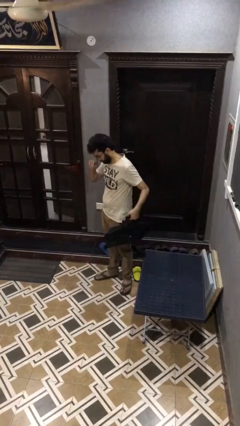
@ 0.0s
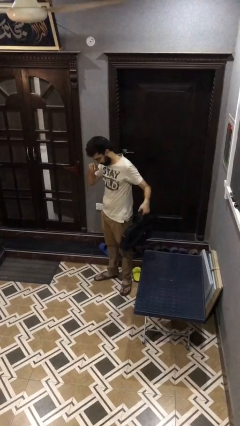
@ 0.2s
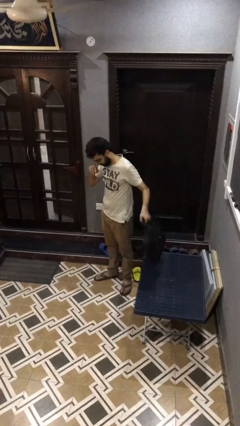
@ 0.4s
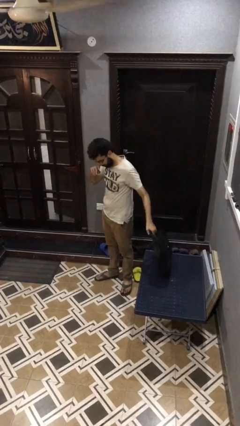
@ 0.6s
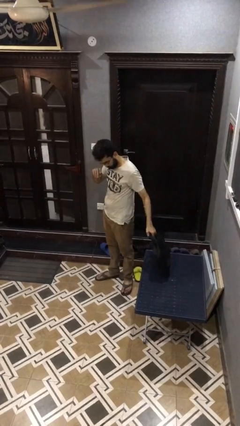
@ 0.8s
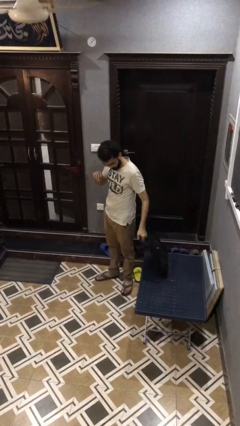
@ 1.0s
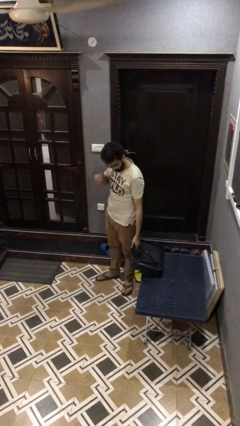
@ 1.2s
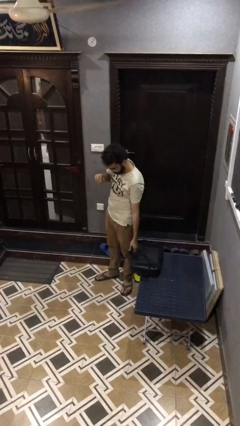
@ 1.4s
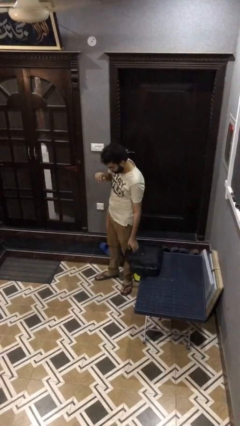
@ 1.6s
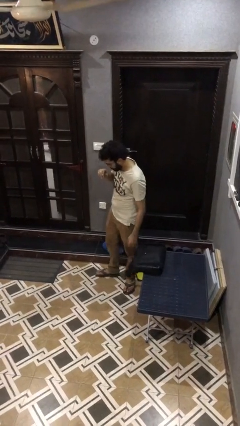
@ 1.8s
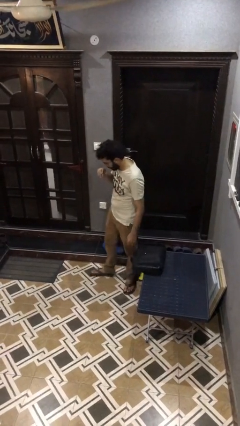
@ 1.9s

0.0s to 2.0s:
person puts down object on table

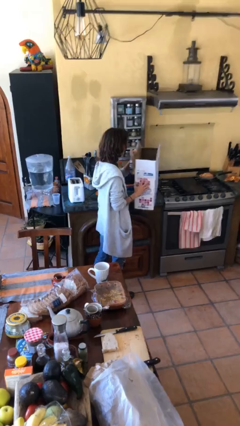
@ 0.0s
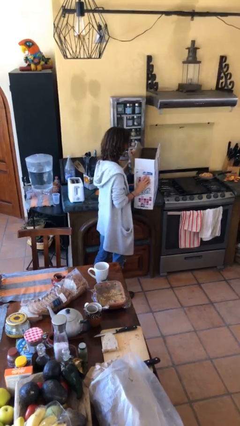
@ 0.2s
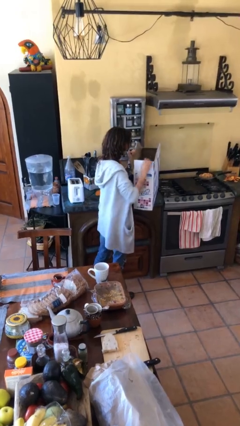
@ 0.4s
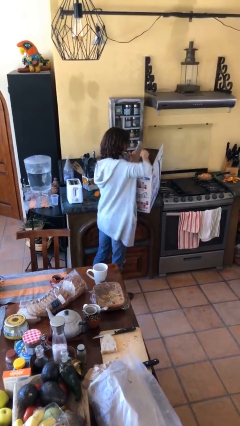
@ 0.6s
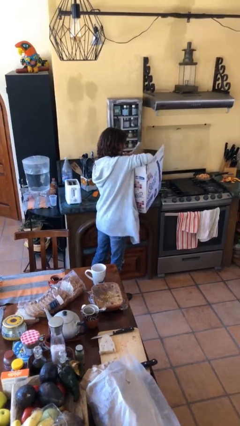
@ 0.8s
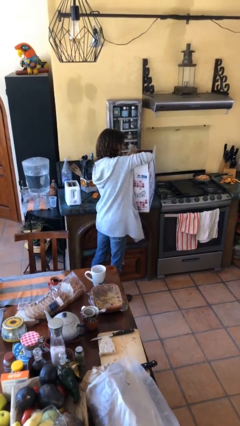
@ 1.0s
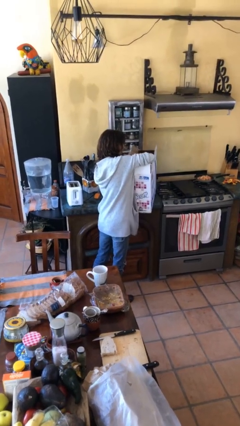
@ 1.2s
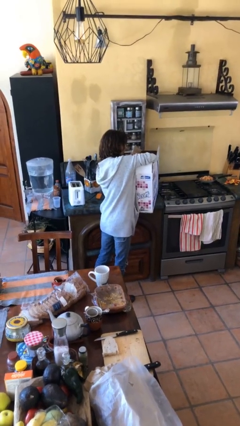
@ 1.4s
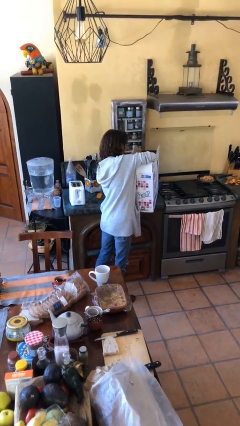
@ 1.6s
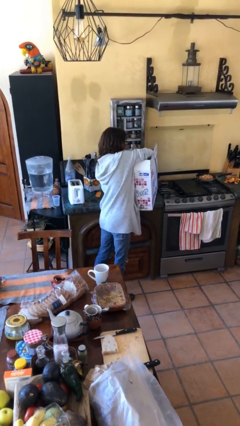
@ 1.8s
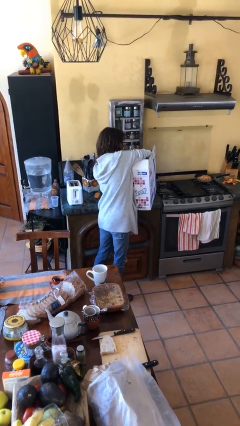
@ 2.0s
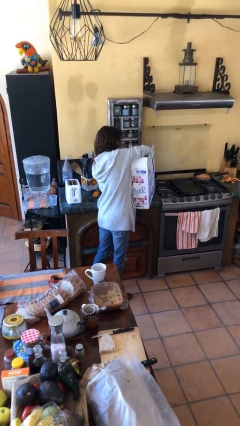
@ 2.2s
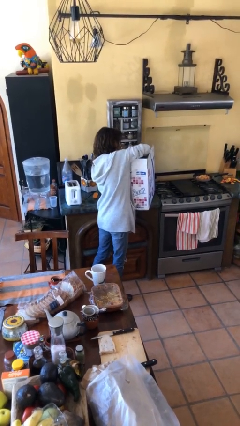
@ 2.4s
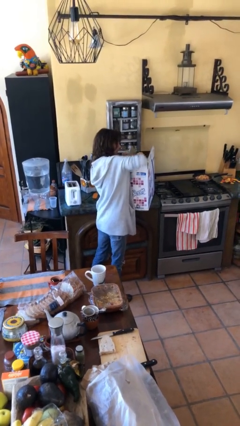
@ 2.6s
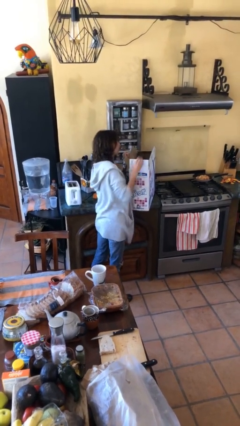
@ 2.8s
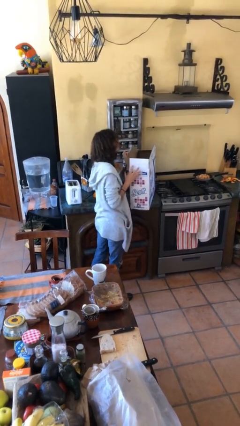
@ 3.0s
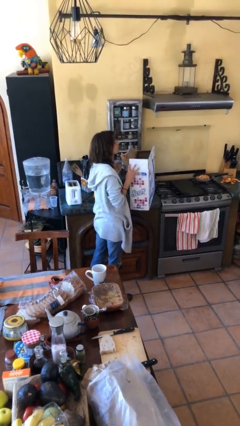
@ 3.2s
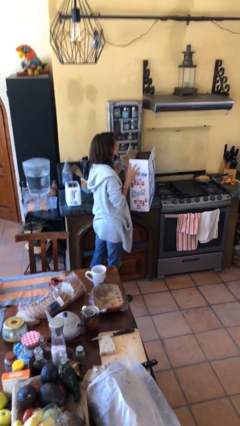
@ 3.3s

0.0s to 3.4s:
person searches in box

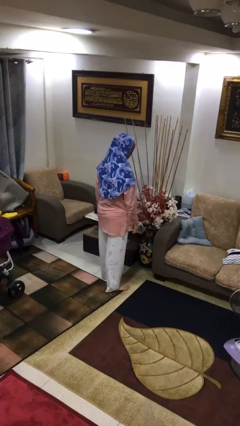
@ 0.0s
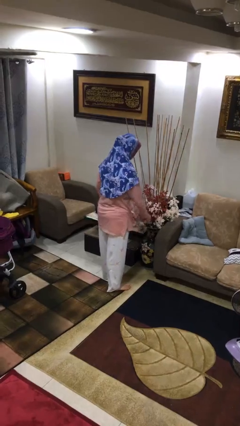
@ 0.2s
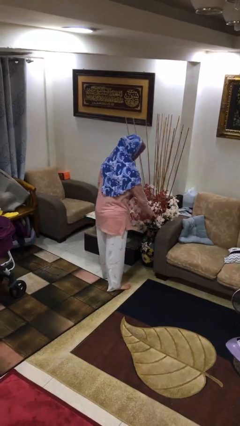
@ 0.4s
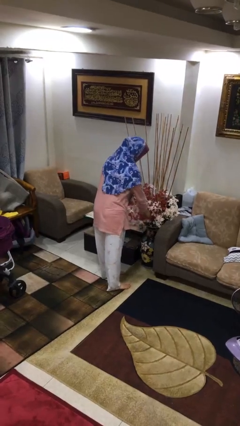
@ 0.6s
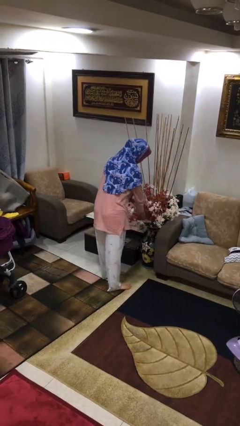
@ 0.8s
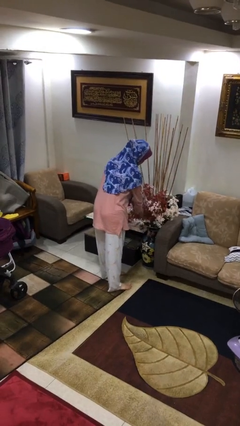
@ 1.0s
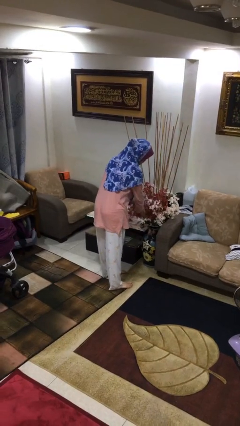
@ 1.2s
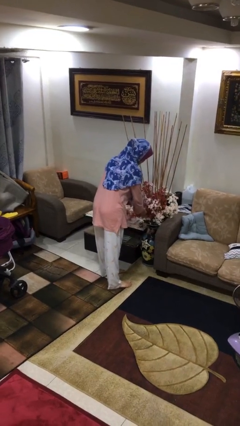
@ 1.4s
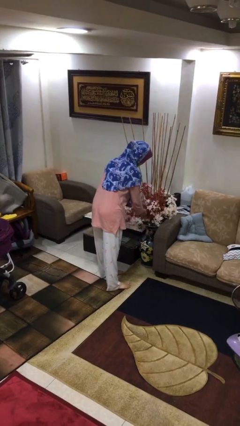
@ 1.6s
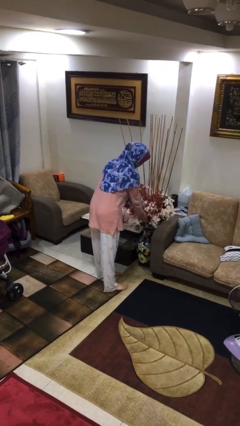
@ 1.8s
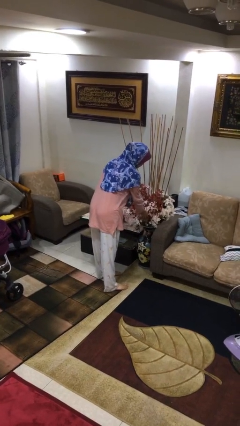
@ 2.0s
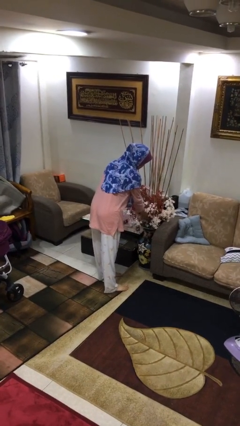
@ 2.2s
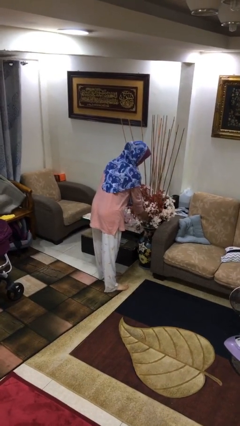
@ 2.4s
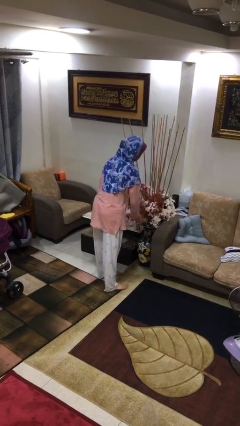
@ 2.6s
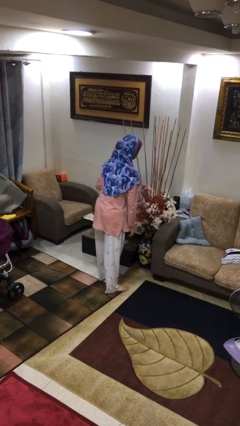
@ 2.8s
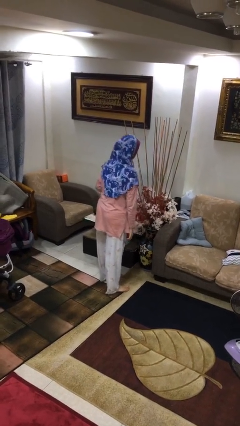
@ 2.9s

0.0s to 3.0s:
person arranges flowers in vase

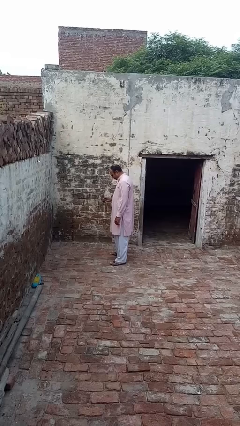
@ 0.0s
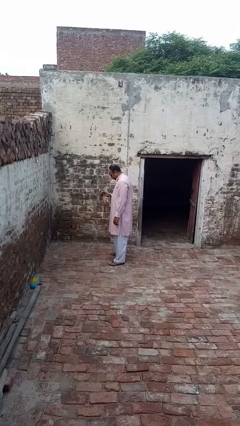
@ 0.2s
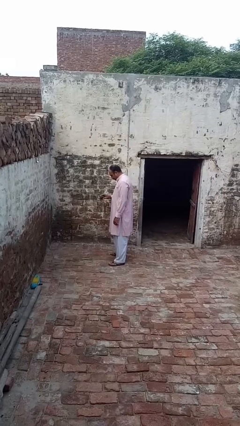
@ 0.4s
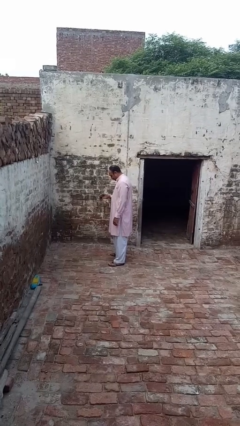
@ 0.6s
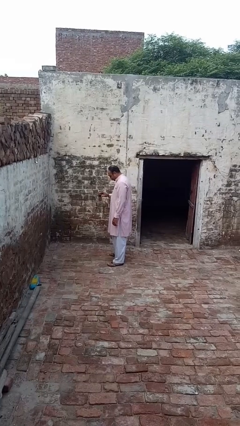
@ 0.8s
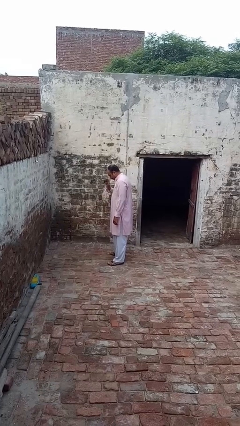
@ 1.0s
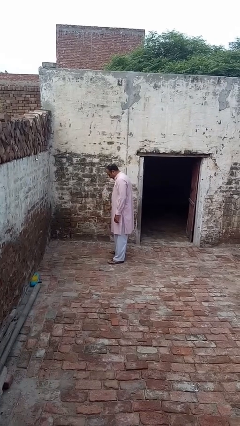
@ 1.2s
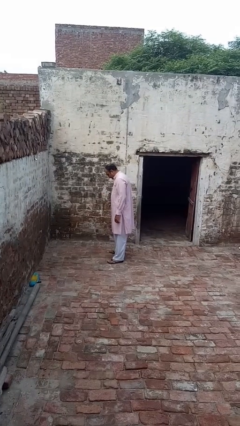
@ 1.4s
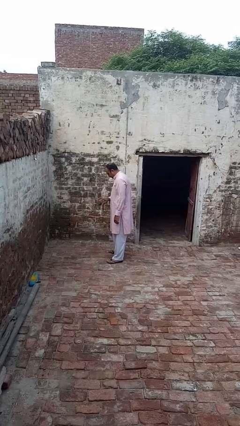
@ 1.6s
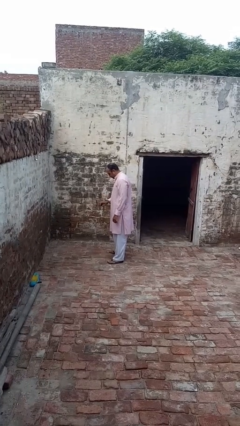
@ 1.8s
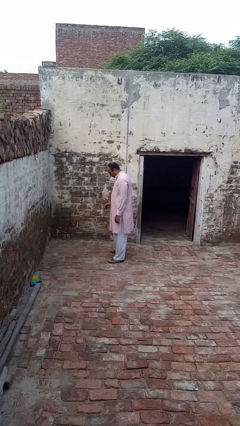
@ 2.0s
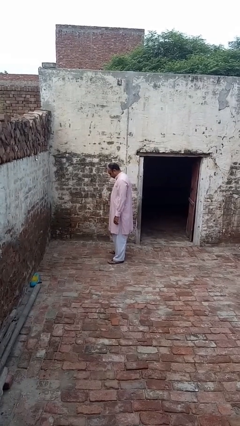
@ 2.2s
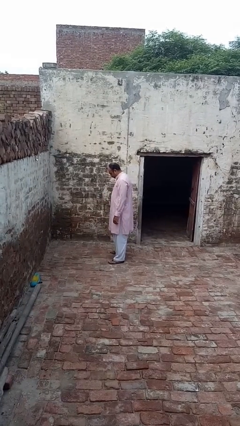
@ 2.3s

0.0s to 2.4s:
person bounces ball on floor

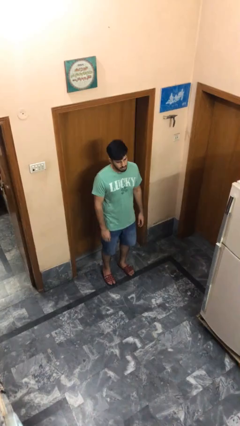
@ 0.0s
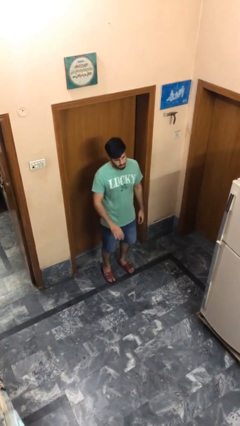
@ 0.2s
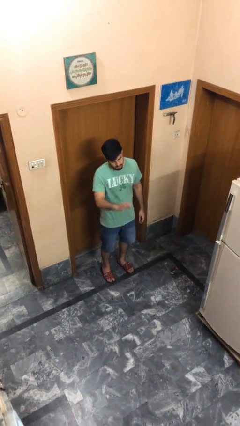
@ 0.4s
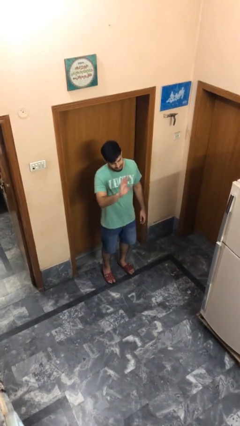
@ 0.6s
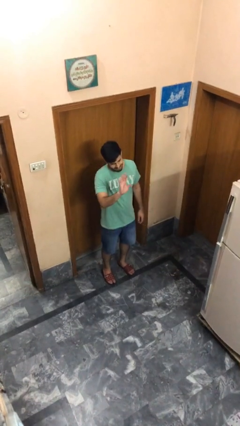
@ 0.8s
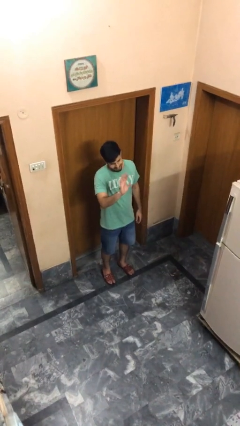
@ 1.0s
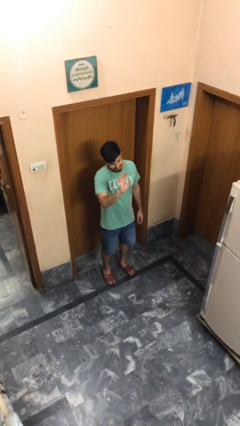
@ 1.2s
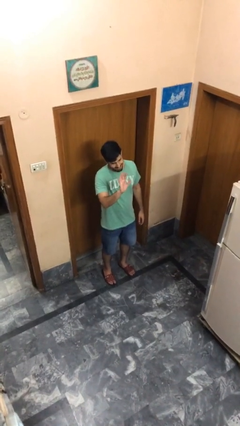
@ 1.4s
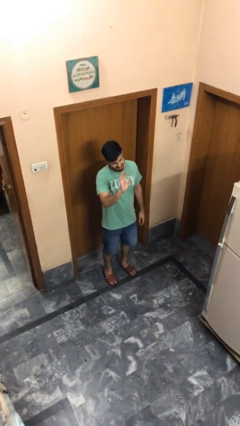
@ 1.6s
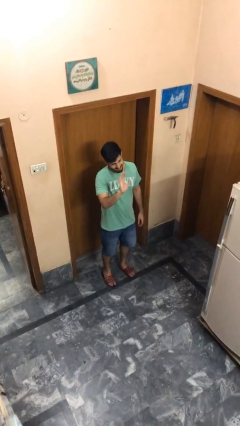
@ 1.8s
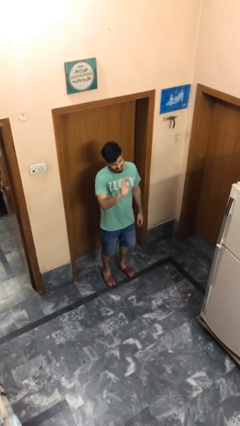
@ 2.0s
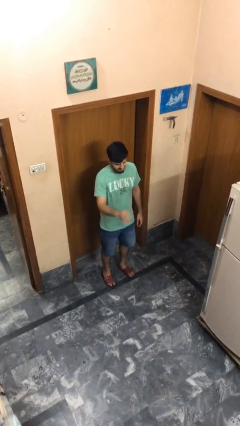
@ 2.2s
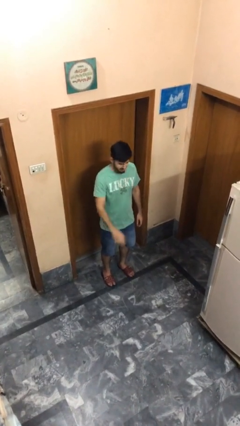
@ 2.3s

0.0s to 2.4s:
person waves at person

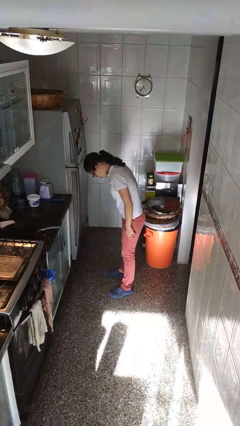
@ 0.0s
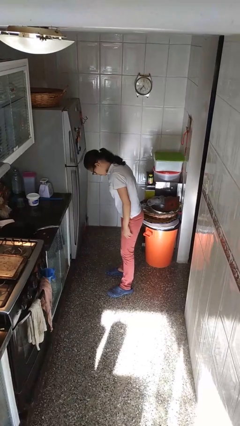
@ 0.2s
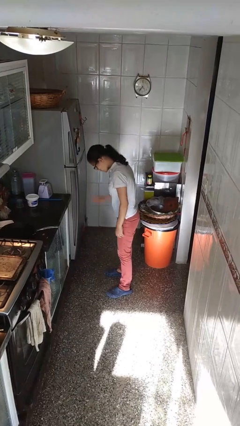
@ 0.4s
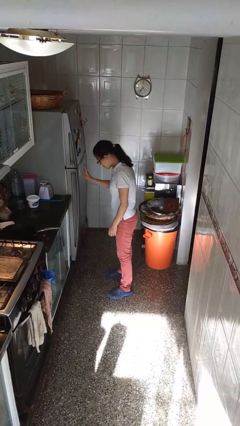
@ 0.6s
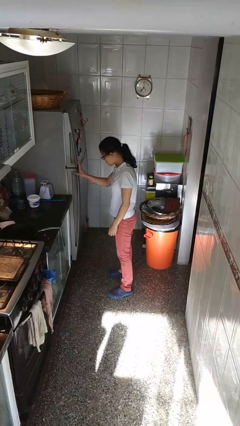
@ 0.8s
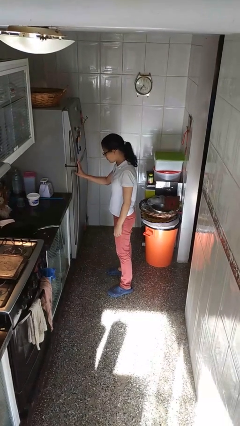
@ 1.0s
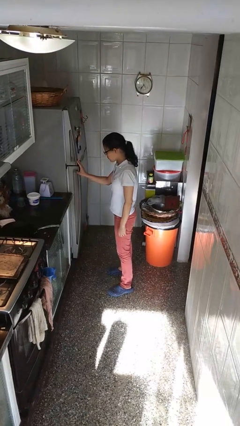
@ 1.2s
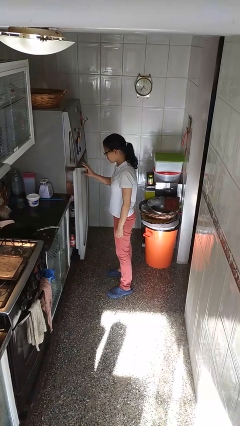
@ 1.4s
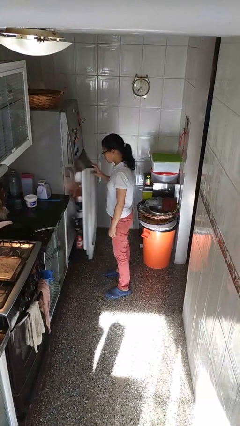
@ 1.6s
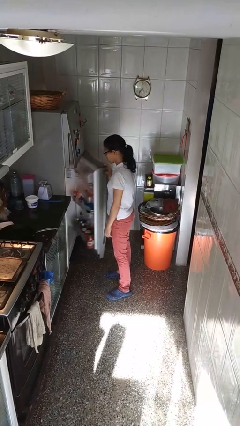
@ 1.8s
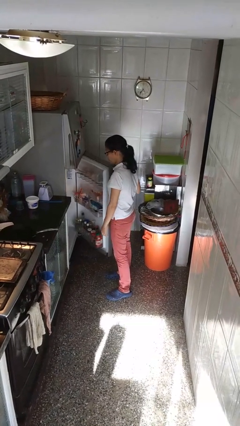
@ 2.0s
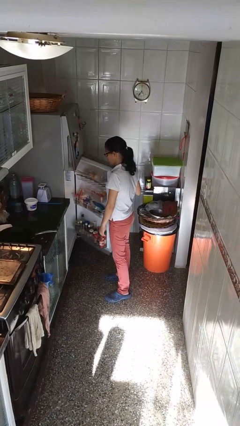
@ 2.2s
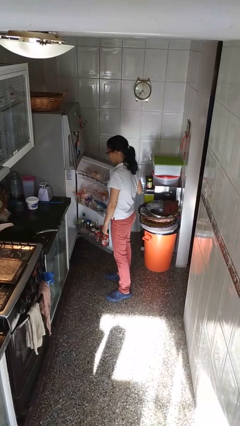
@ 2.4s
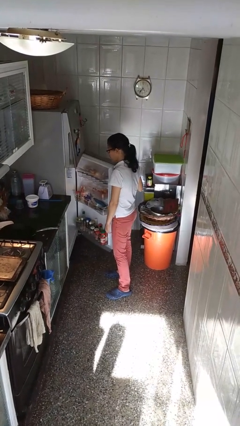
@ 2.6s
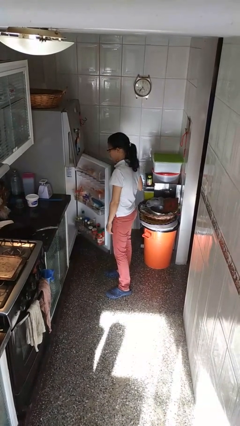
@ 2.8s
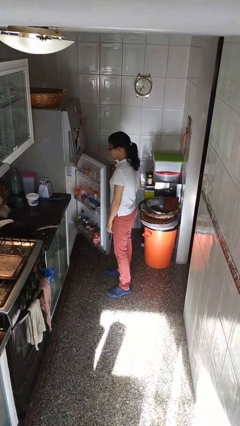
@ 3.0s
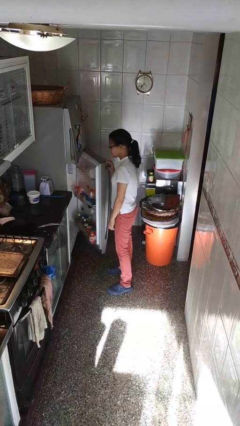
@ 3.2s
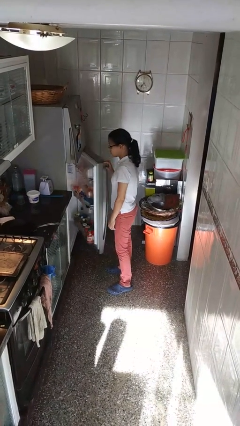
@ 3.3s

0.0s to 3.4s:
person opens refrigerator

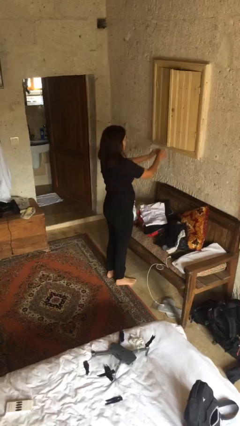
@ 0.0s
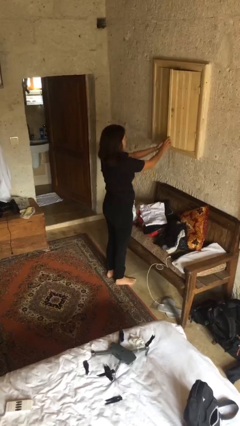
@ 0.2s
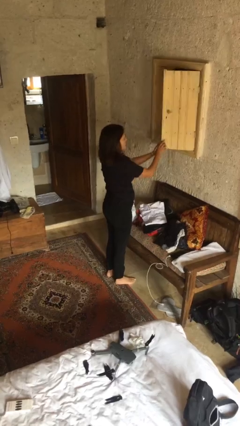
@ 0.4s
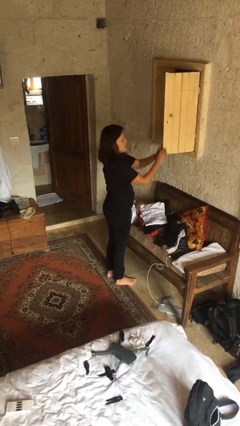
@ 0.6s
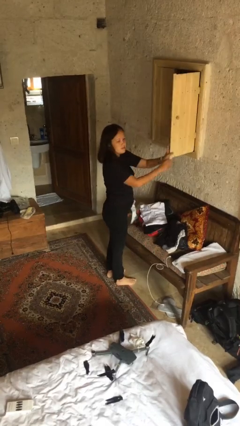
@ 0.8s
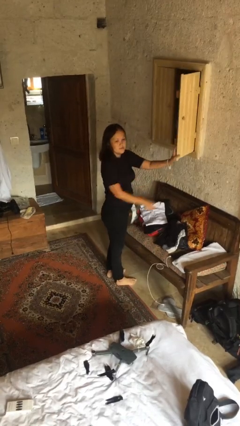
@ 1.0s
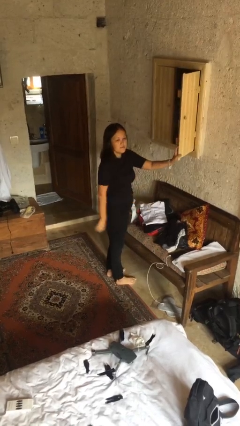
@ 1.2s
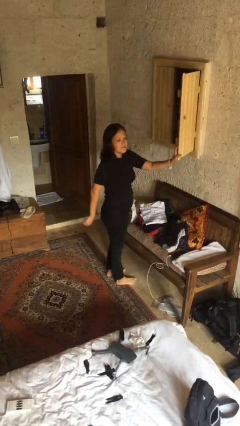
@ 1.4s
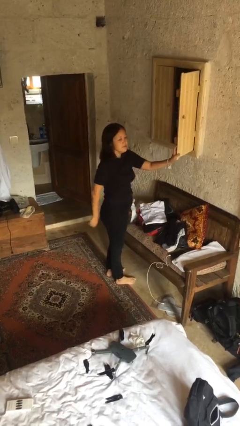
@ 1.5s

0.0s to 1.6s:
person opens dresser drawer
